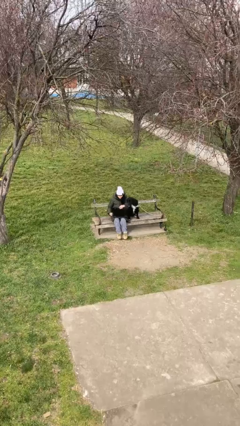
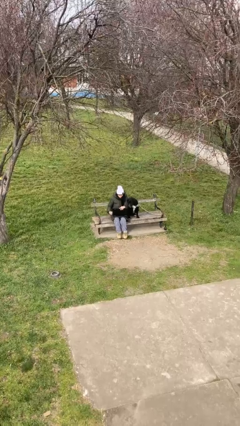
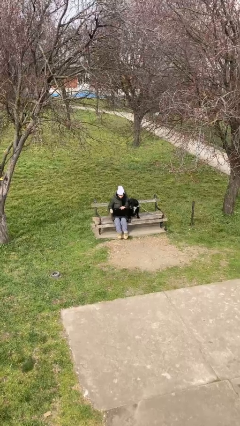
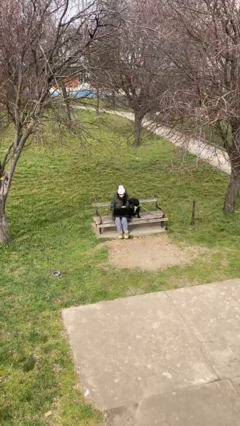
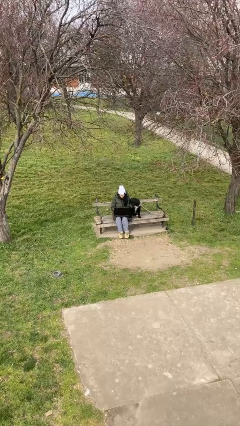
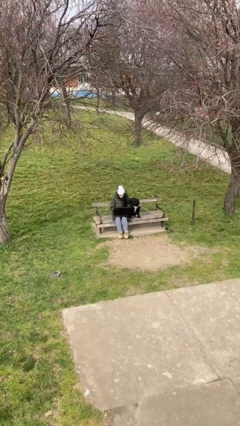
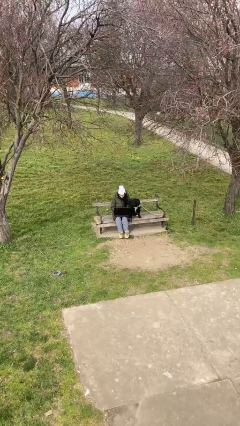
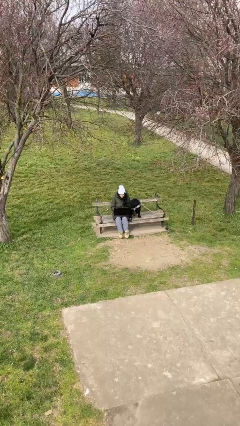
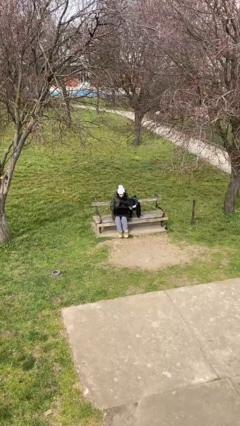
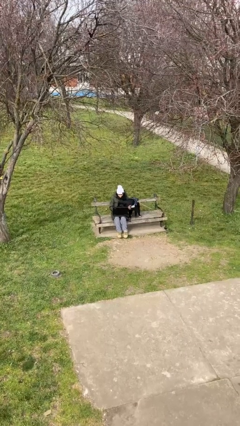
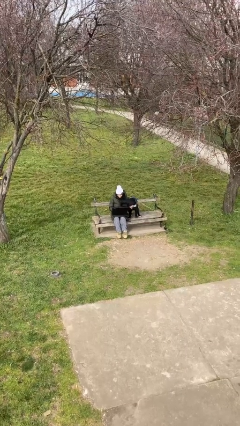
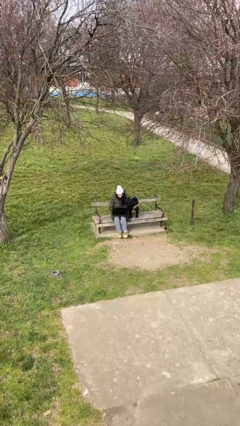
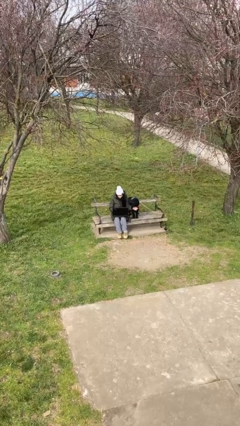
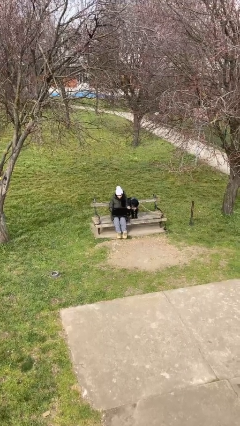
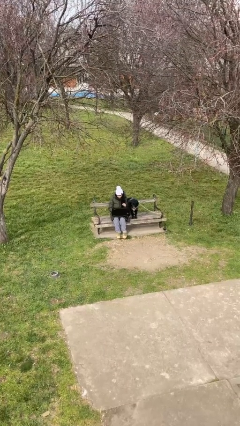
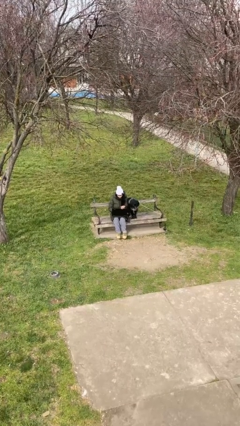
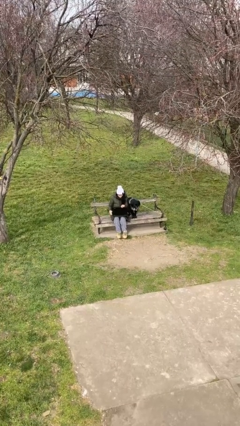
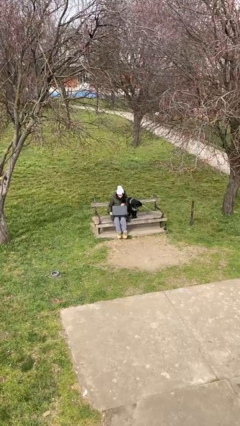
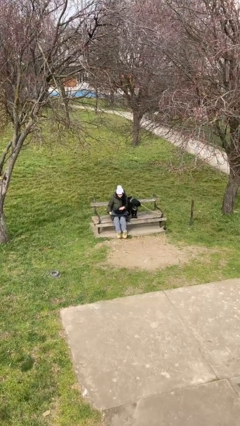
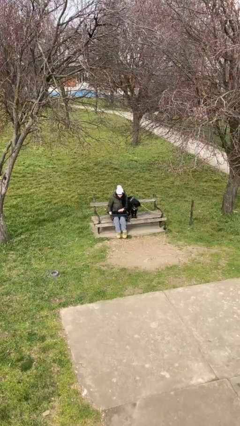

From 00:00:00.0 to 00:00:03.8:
person interacts with laptop

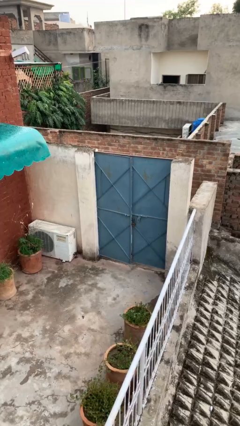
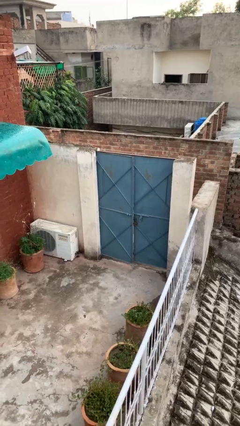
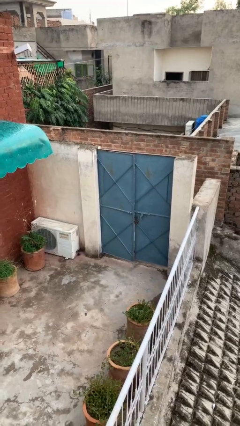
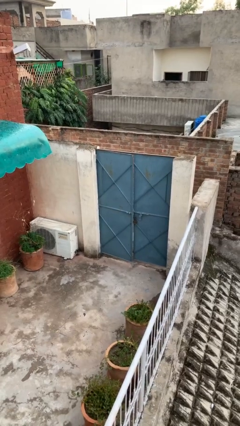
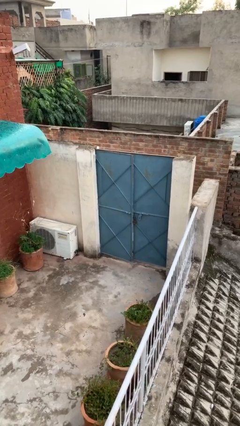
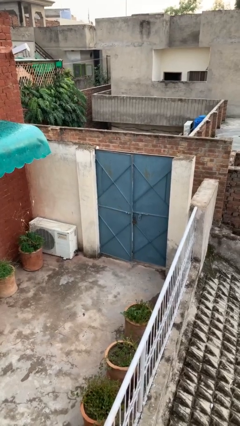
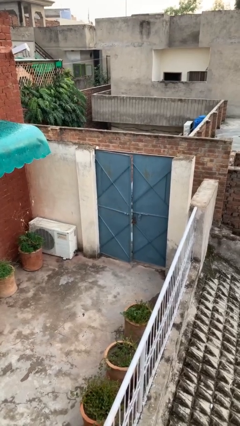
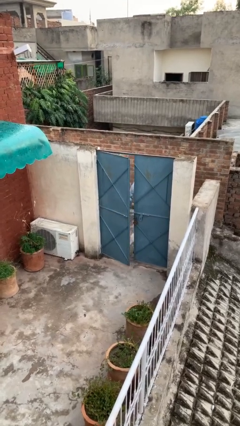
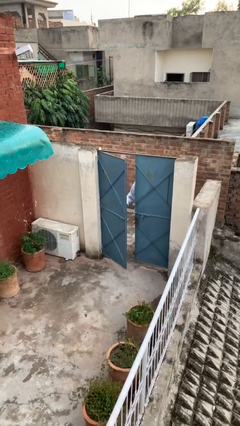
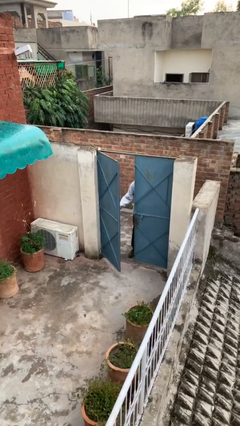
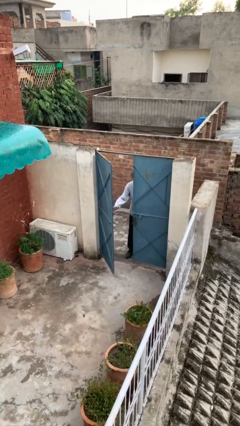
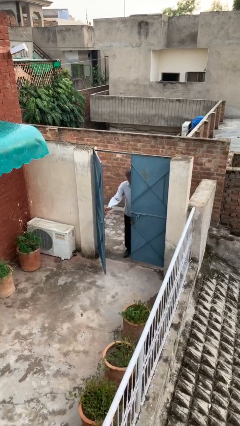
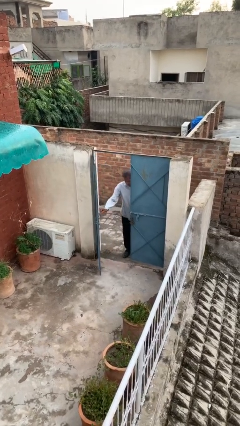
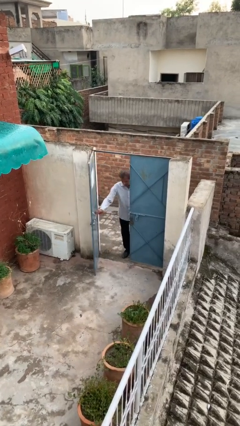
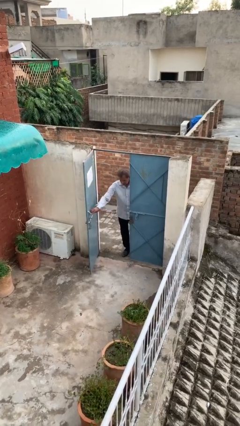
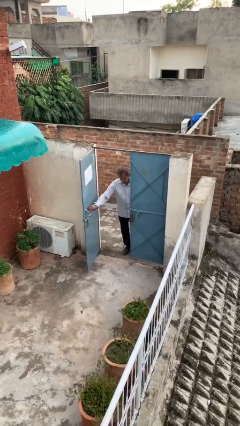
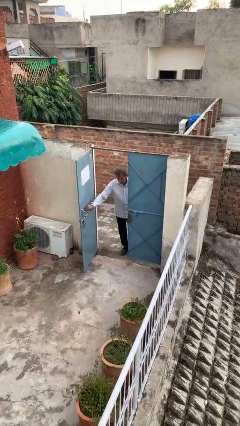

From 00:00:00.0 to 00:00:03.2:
person opens facility door

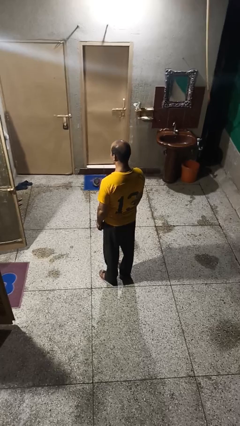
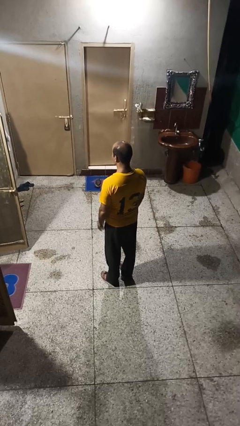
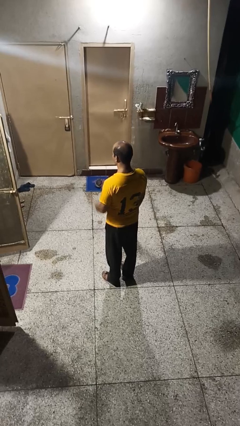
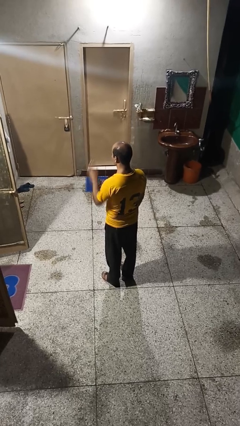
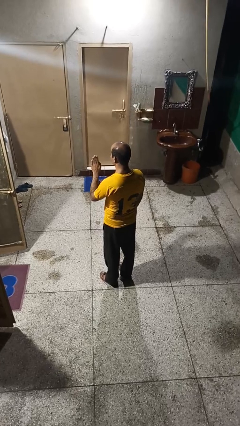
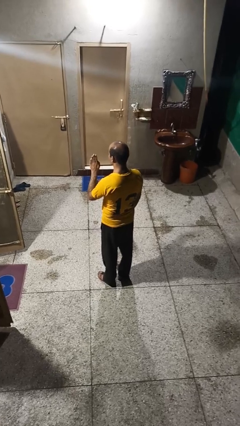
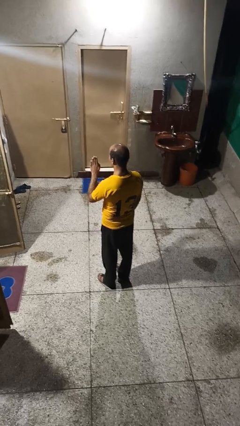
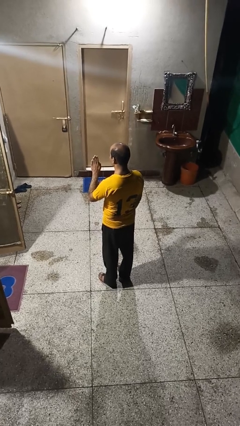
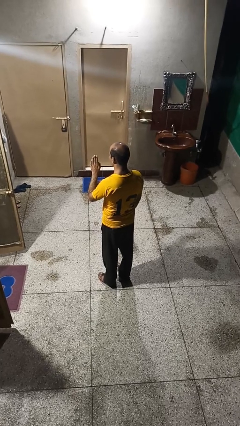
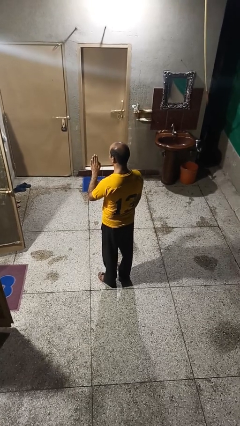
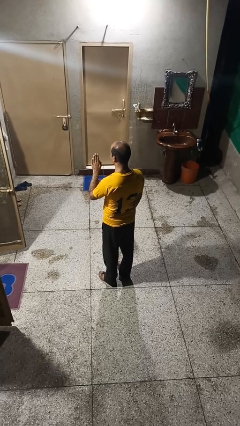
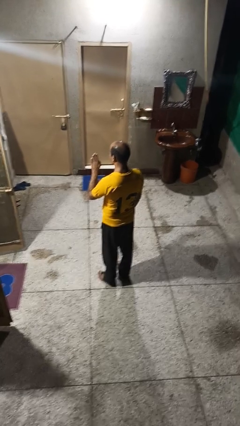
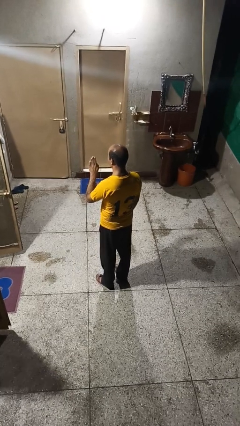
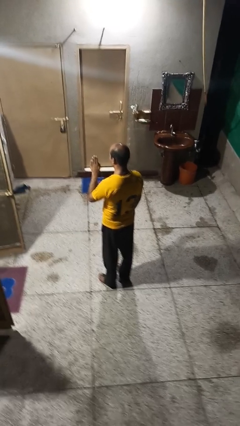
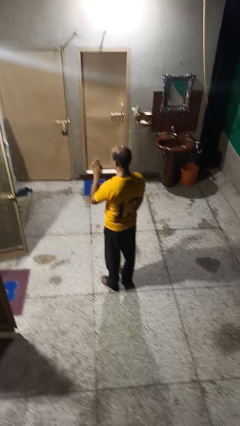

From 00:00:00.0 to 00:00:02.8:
person gestures stop

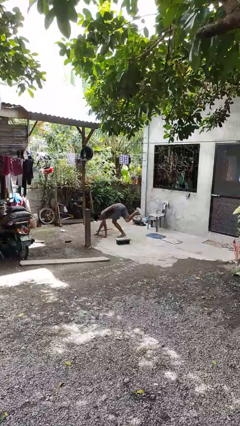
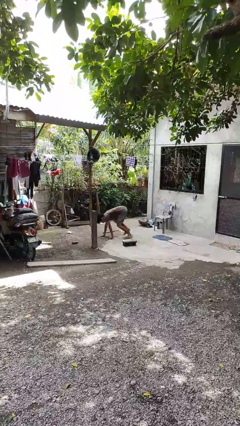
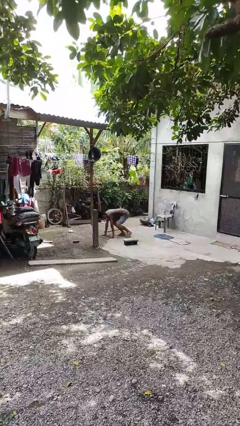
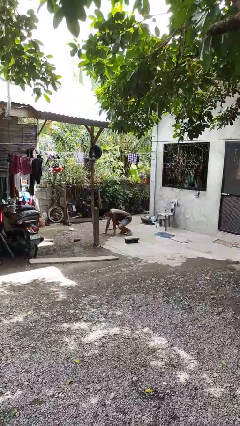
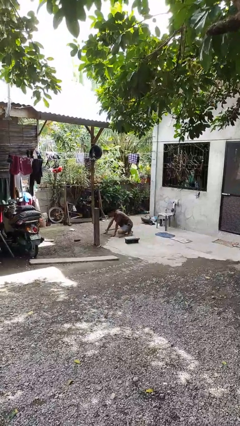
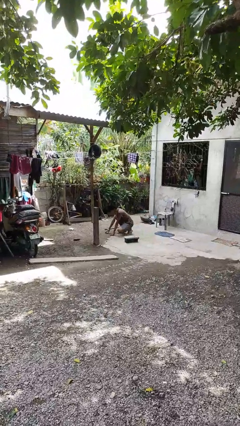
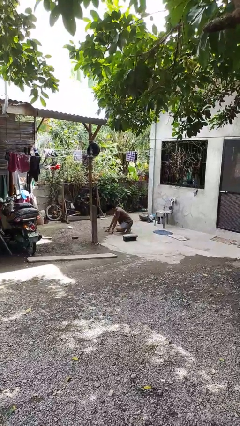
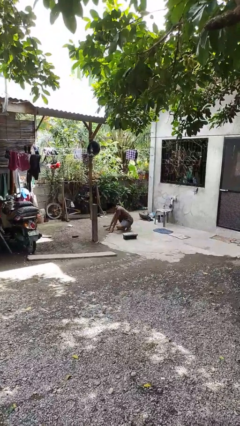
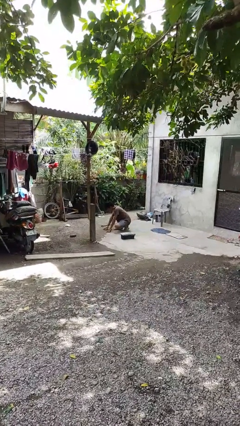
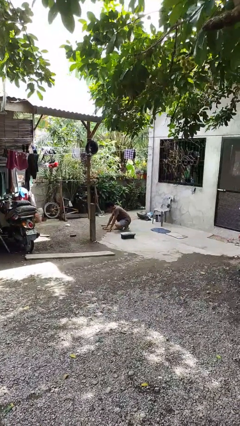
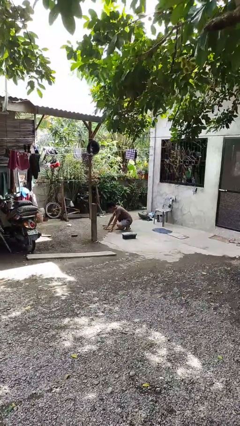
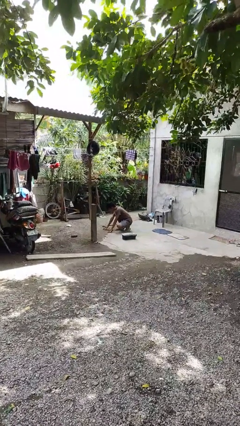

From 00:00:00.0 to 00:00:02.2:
person lies down on floor

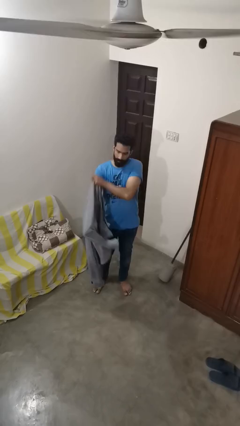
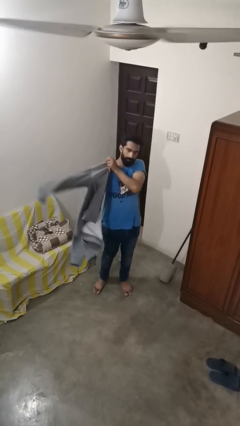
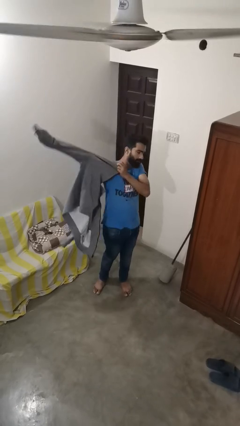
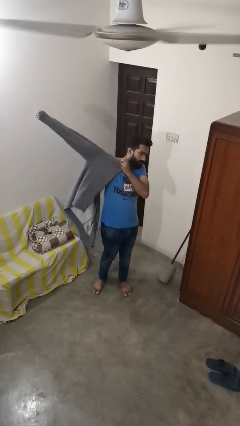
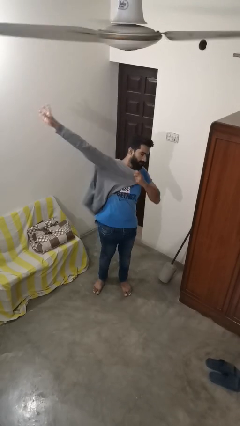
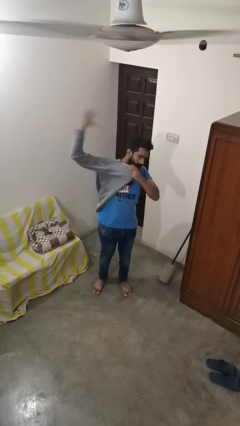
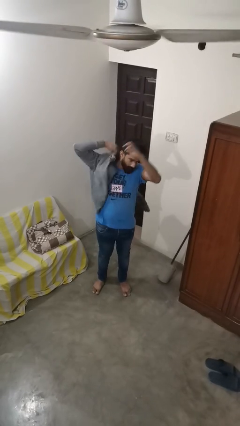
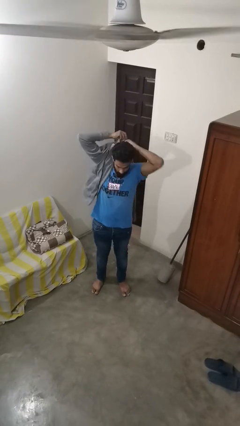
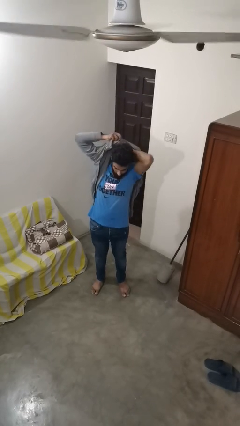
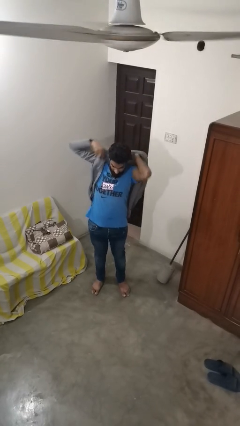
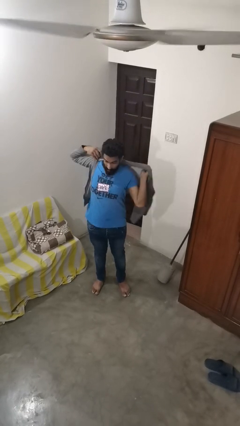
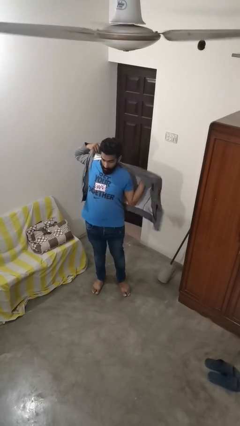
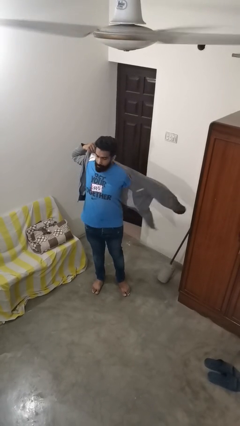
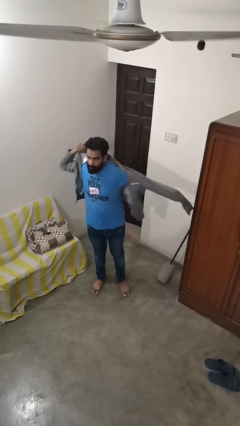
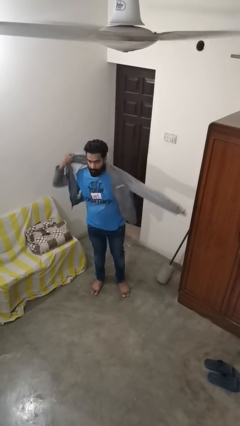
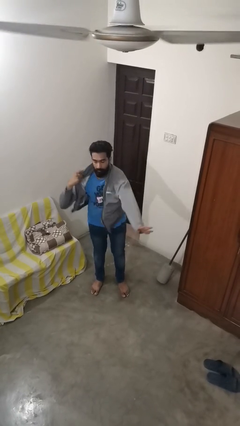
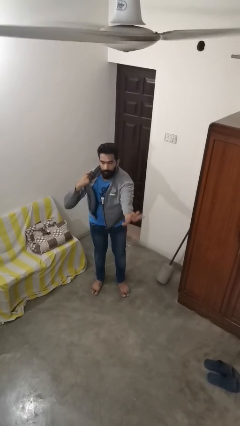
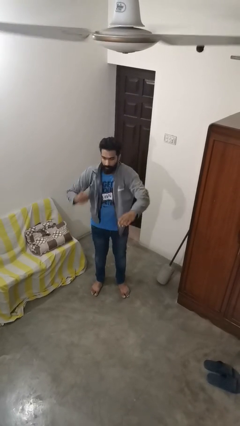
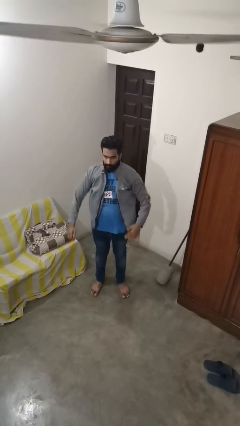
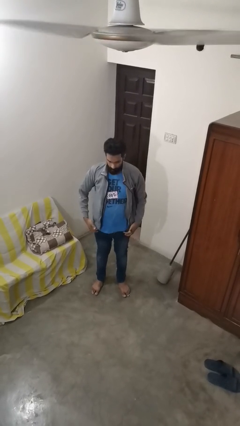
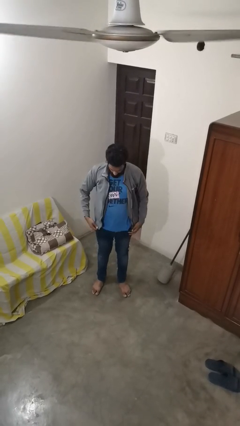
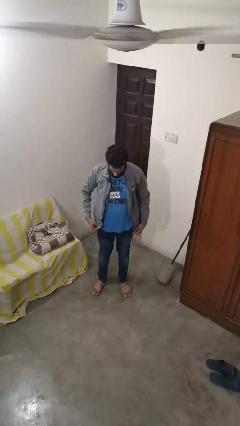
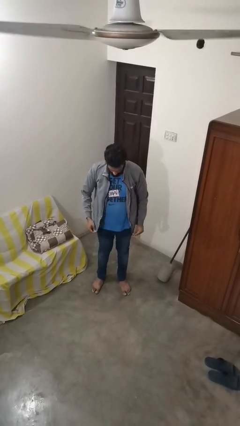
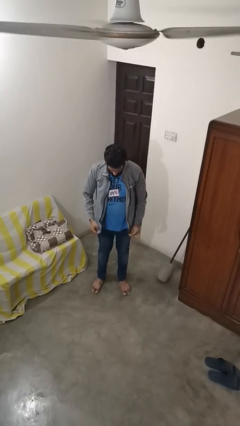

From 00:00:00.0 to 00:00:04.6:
person puts on jacket

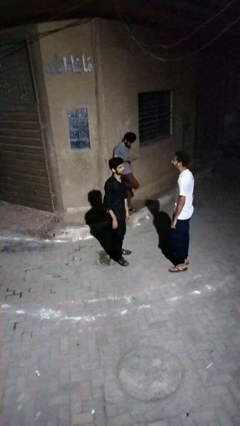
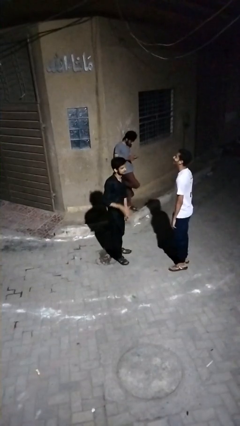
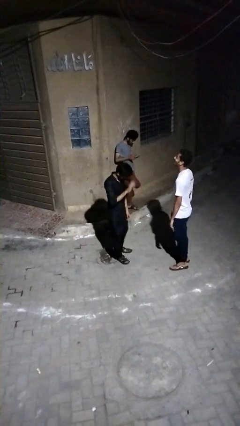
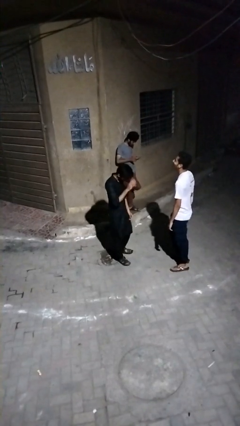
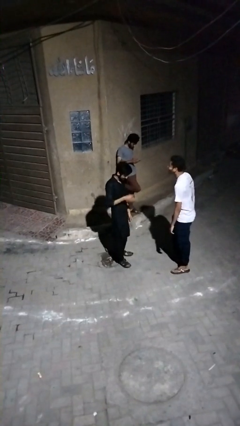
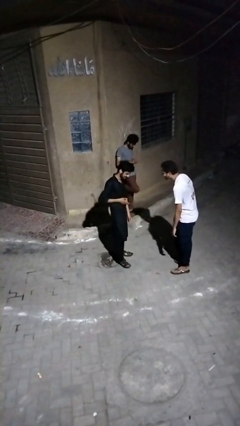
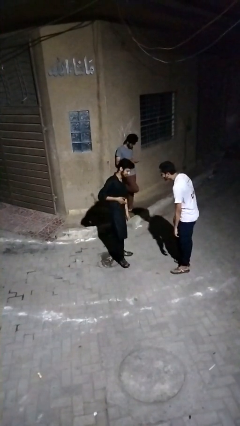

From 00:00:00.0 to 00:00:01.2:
person laughs with person
